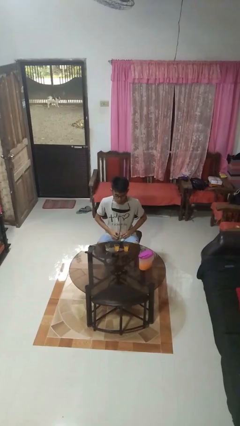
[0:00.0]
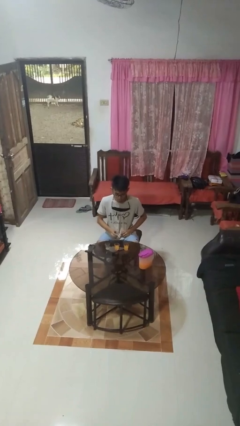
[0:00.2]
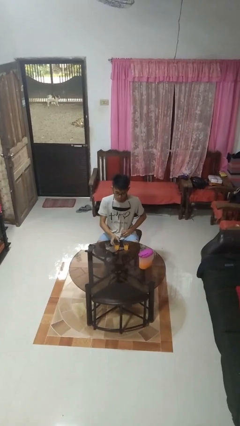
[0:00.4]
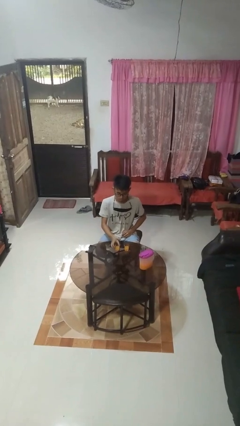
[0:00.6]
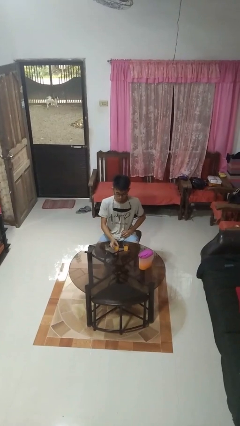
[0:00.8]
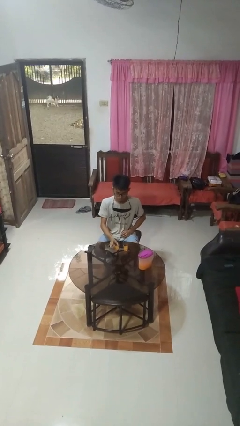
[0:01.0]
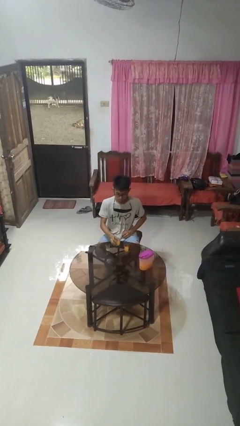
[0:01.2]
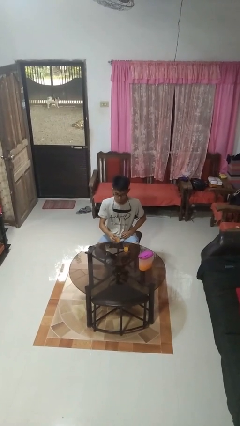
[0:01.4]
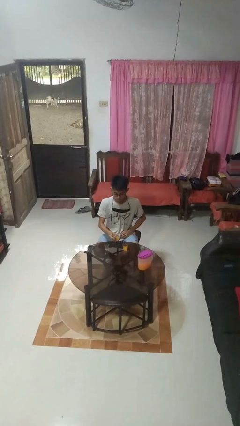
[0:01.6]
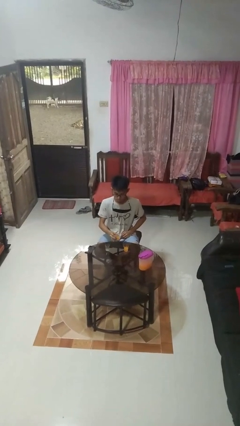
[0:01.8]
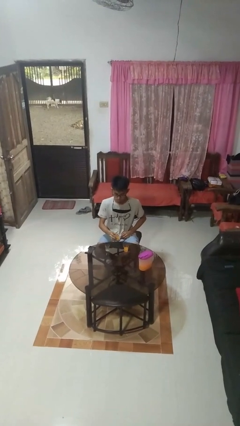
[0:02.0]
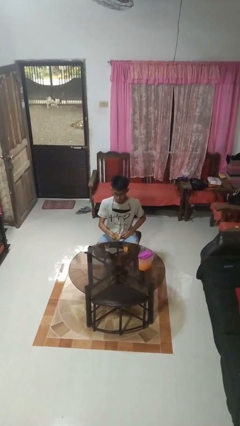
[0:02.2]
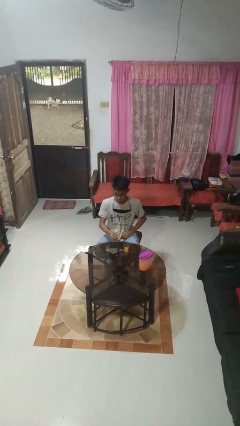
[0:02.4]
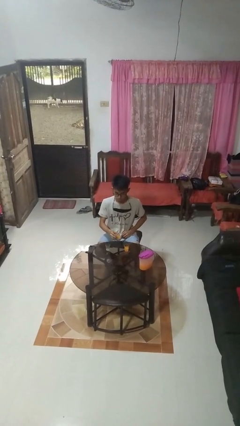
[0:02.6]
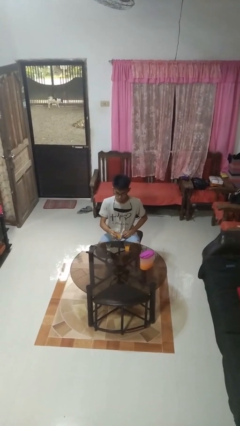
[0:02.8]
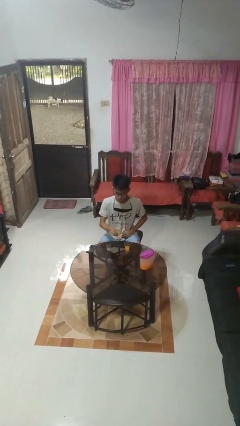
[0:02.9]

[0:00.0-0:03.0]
person picks up object from table

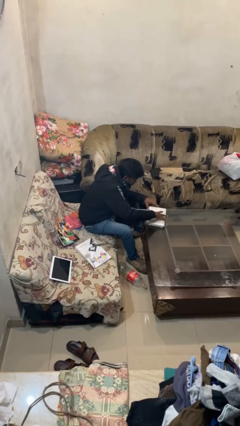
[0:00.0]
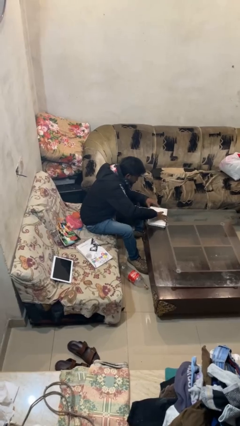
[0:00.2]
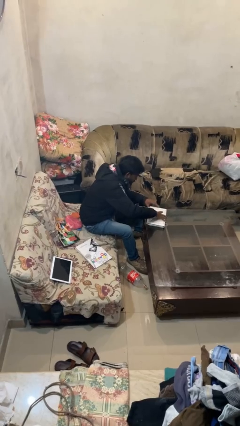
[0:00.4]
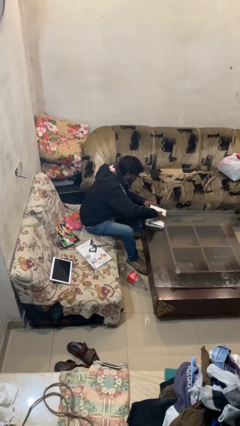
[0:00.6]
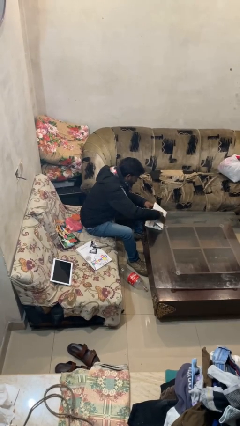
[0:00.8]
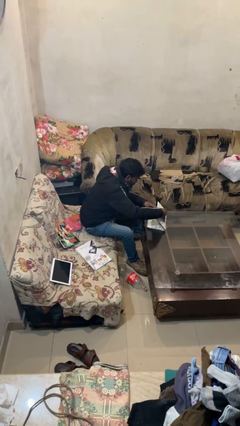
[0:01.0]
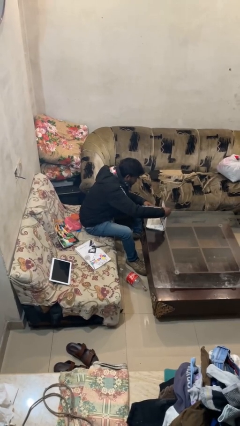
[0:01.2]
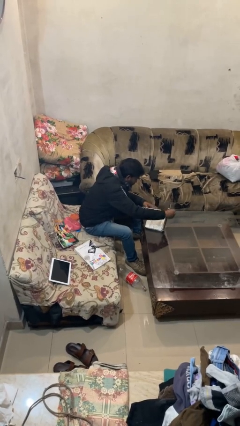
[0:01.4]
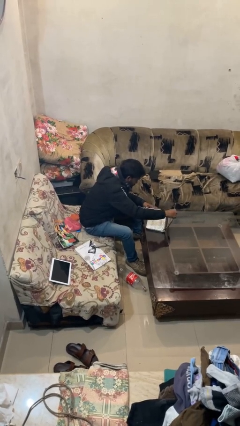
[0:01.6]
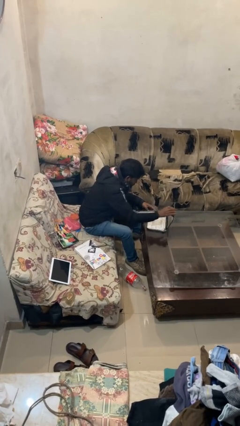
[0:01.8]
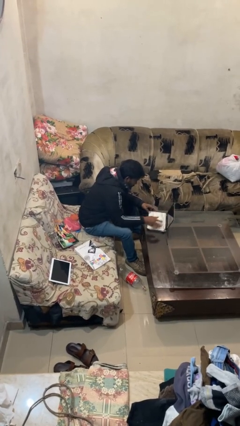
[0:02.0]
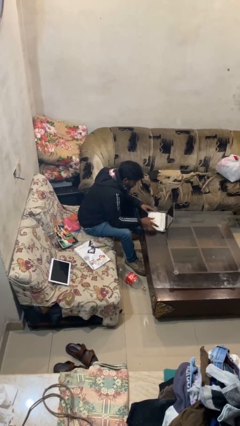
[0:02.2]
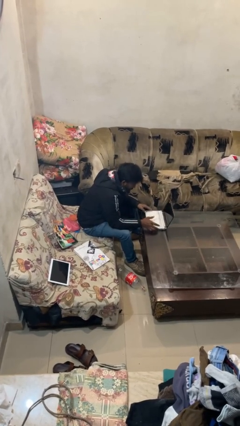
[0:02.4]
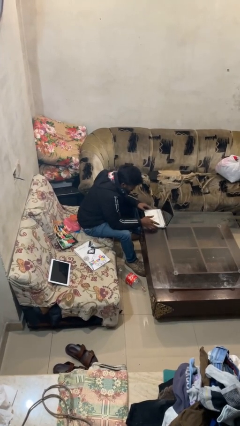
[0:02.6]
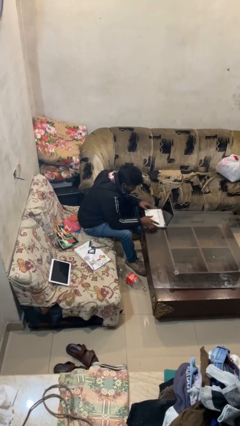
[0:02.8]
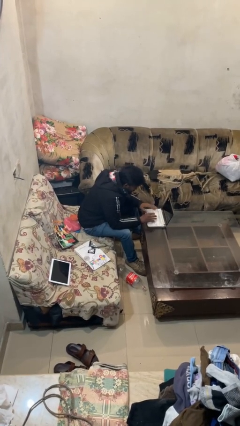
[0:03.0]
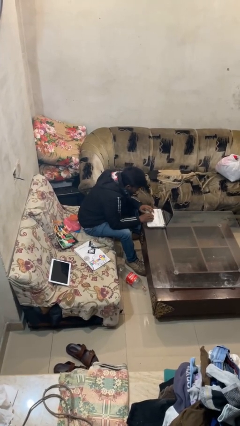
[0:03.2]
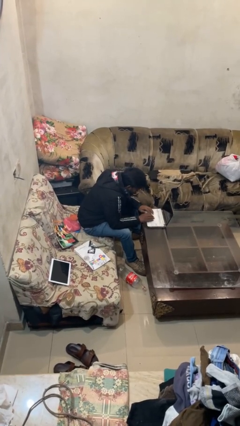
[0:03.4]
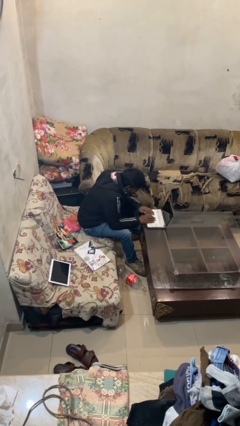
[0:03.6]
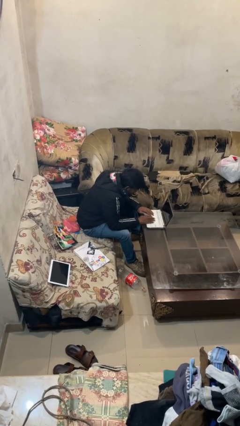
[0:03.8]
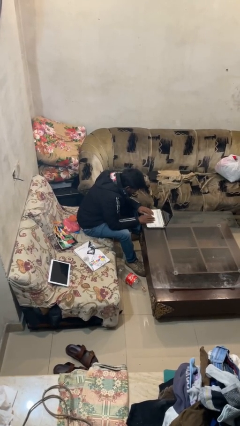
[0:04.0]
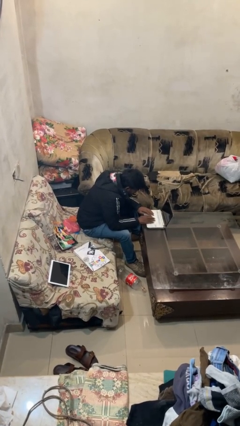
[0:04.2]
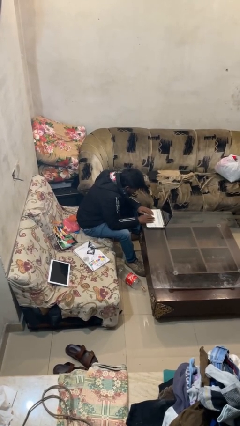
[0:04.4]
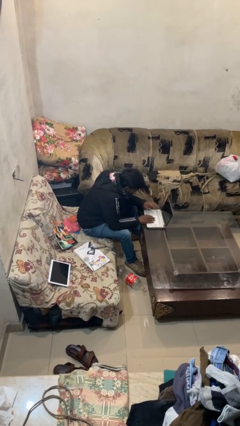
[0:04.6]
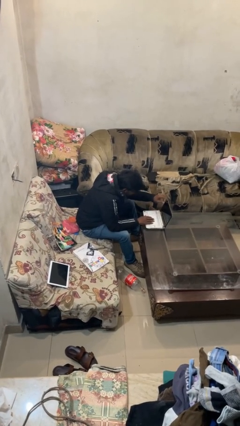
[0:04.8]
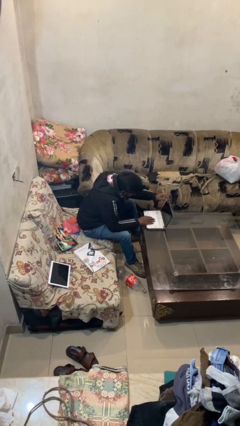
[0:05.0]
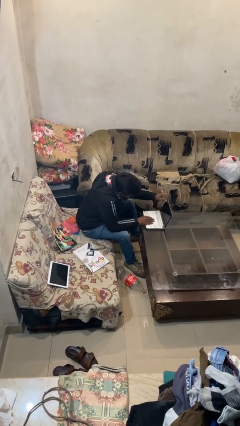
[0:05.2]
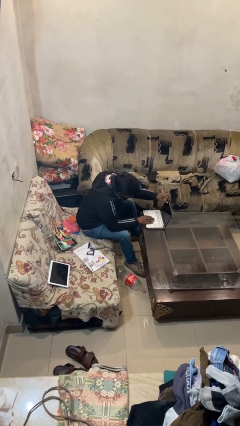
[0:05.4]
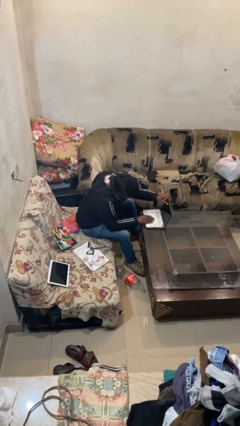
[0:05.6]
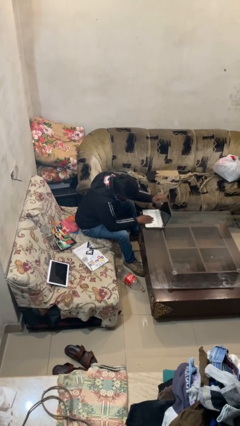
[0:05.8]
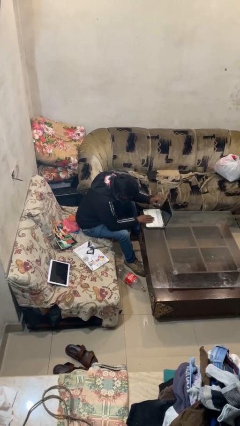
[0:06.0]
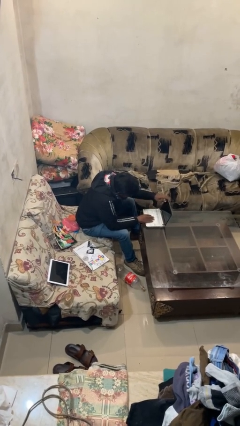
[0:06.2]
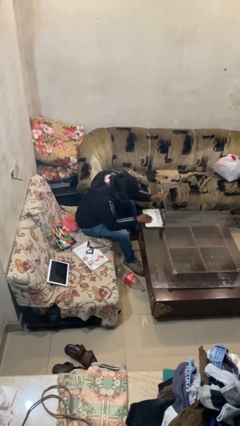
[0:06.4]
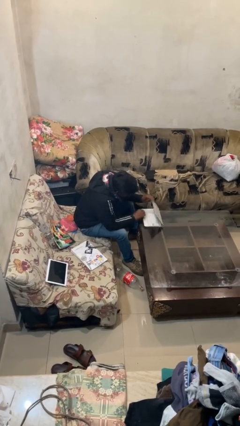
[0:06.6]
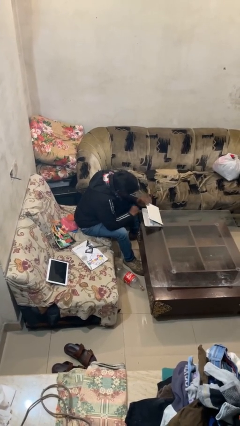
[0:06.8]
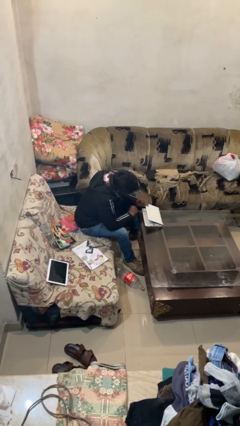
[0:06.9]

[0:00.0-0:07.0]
person interacts with laptop

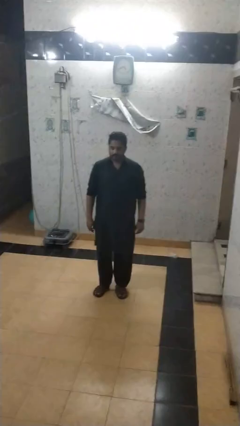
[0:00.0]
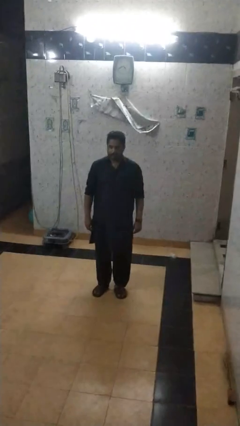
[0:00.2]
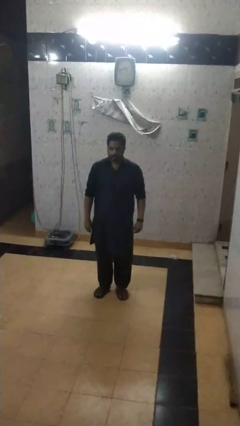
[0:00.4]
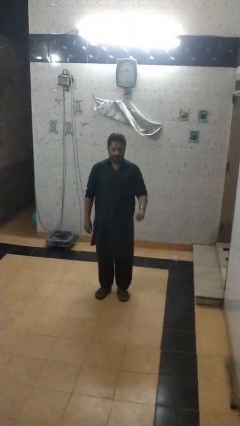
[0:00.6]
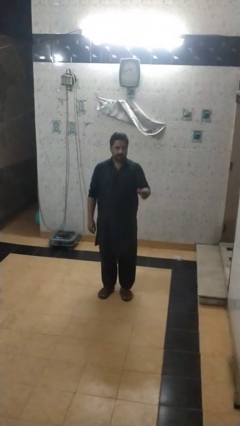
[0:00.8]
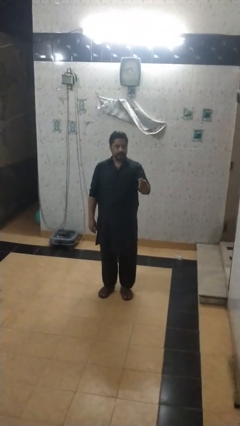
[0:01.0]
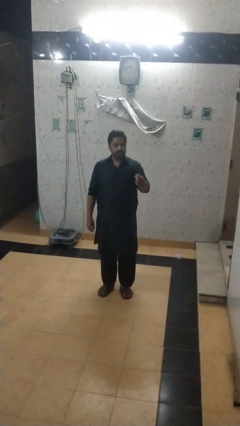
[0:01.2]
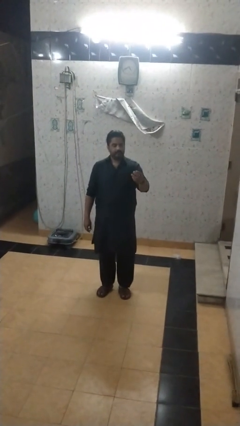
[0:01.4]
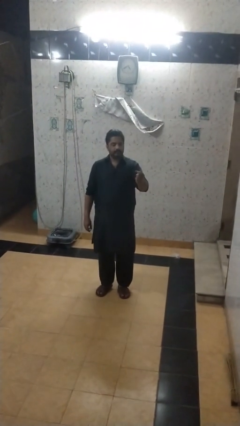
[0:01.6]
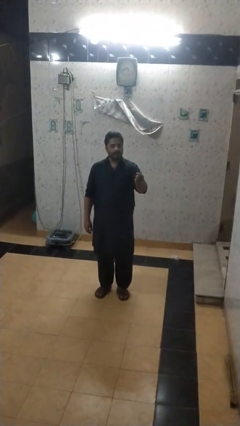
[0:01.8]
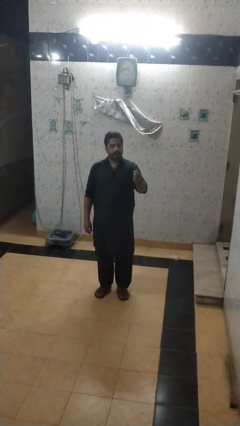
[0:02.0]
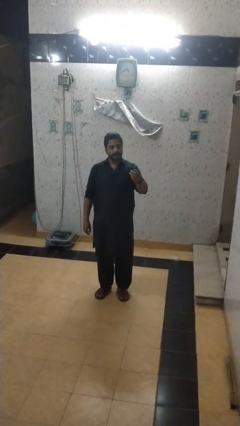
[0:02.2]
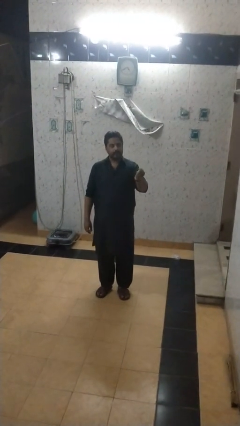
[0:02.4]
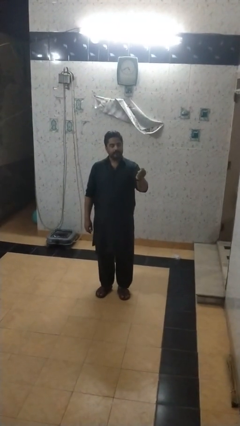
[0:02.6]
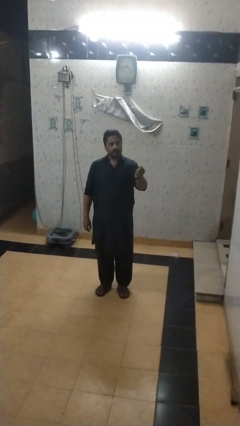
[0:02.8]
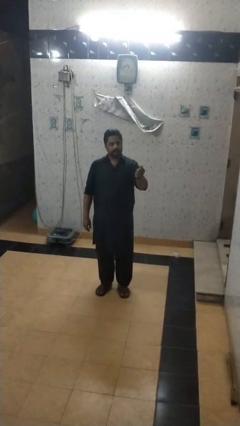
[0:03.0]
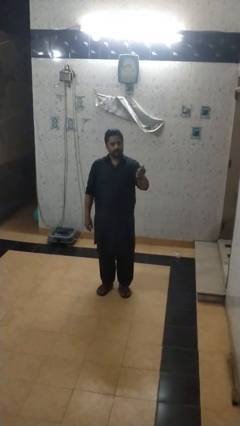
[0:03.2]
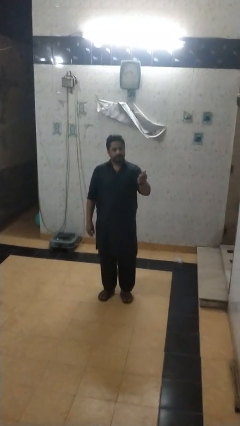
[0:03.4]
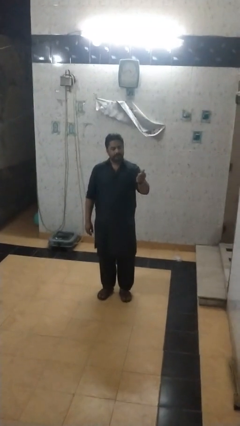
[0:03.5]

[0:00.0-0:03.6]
person snaps fingers

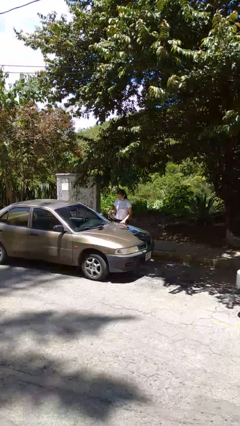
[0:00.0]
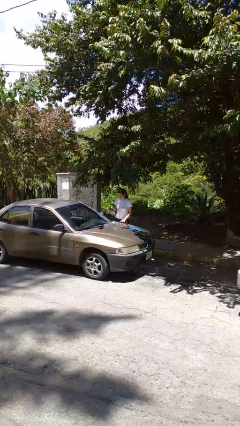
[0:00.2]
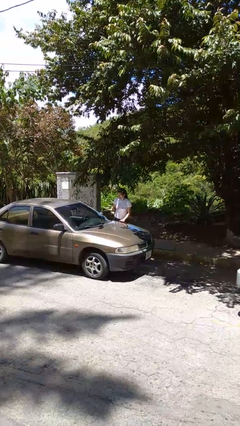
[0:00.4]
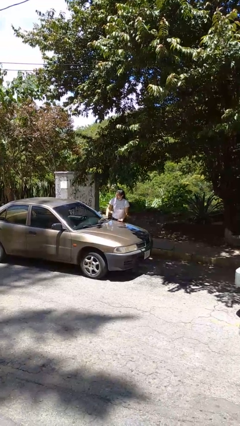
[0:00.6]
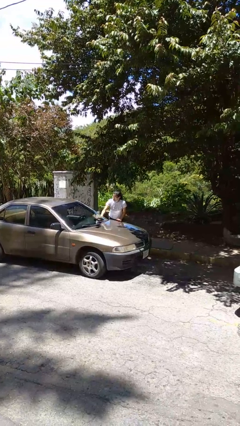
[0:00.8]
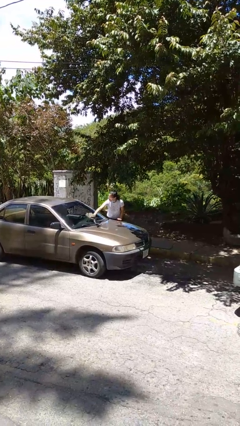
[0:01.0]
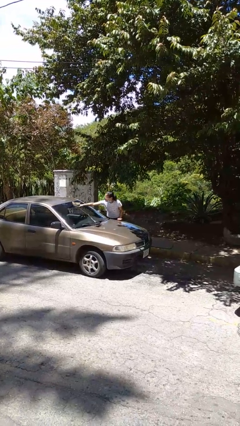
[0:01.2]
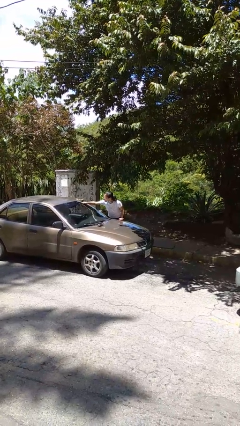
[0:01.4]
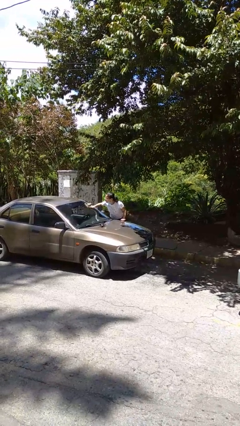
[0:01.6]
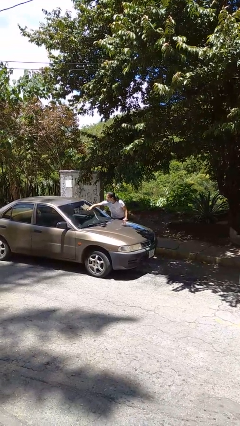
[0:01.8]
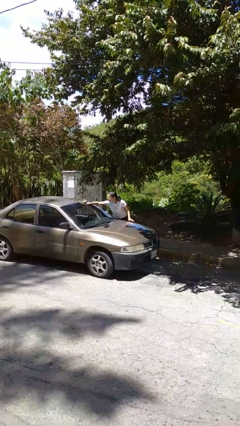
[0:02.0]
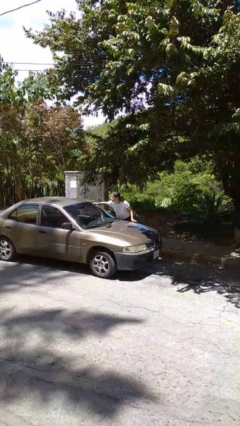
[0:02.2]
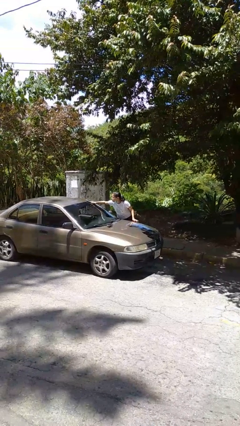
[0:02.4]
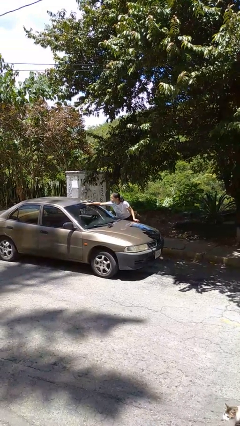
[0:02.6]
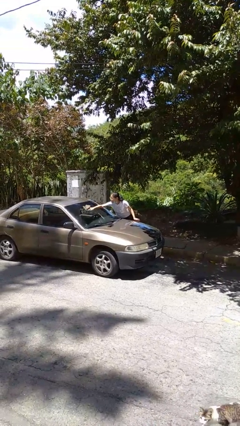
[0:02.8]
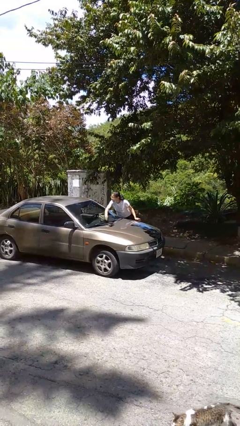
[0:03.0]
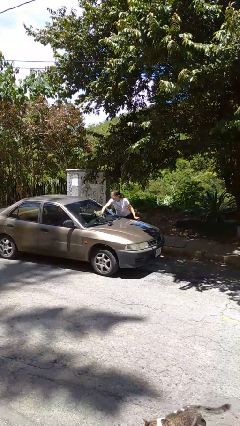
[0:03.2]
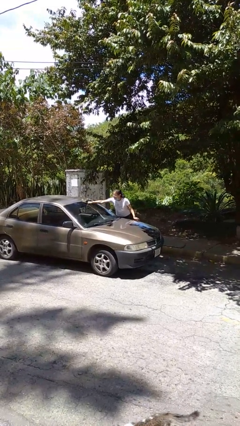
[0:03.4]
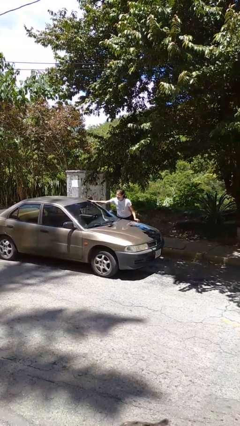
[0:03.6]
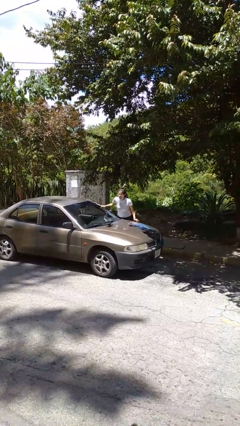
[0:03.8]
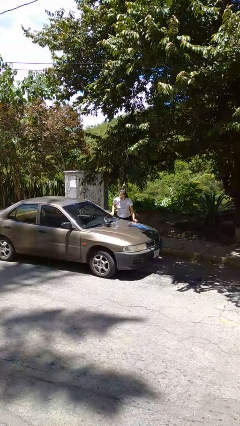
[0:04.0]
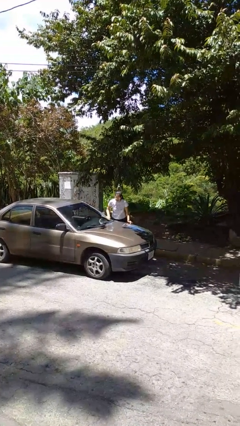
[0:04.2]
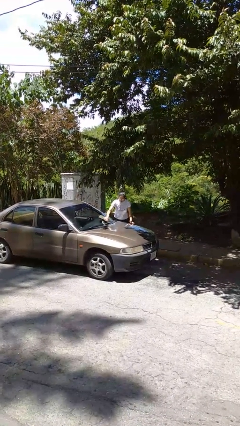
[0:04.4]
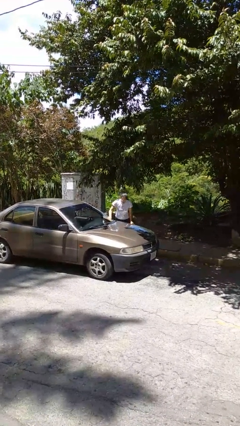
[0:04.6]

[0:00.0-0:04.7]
person polishes car with rag
